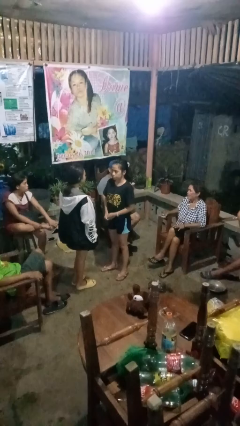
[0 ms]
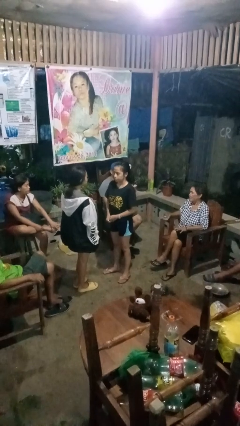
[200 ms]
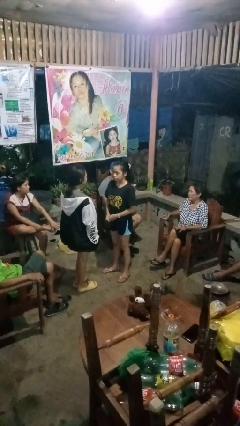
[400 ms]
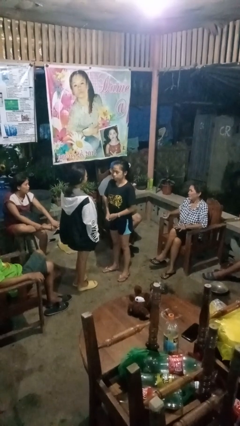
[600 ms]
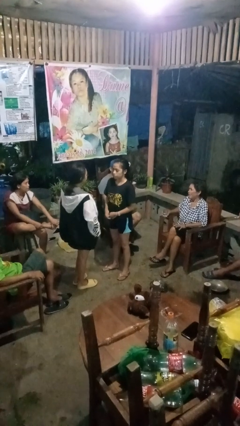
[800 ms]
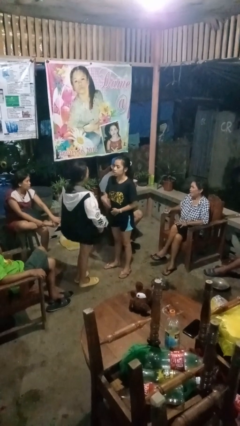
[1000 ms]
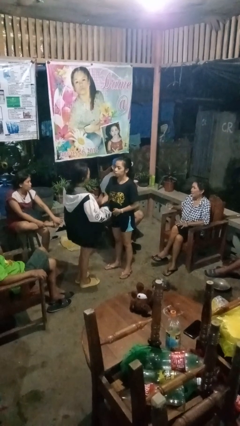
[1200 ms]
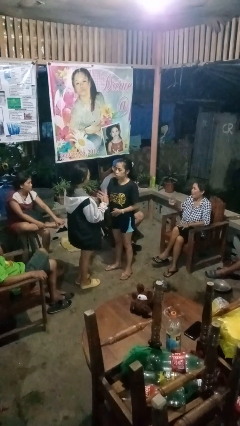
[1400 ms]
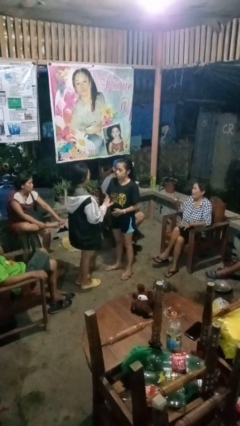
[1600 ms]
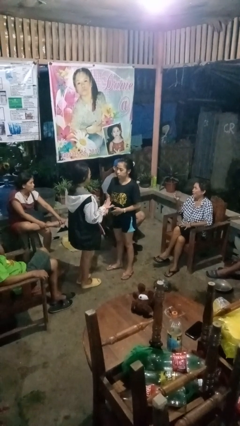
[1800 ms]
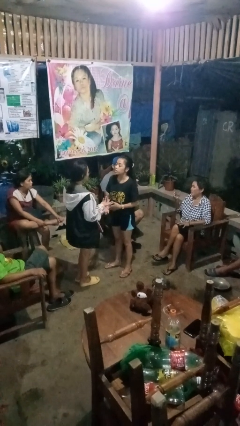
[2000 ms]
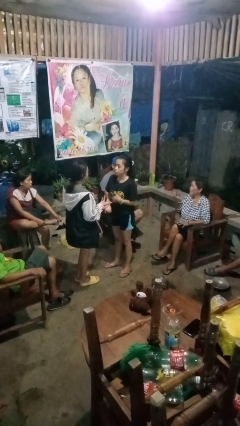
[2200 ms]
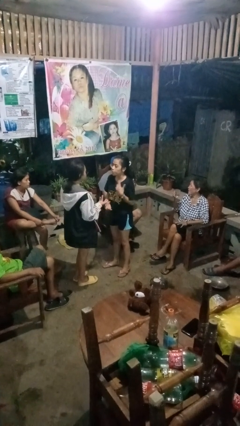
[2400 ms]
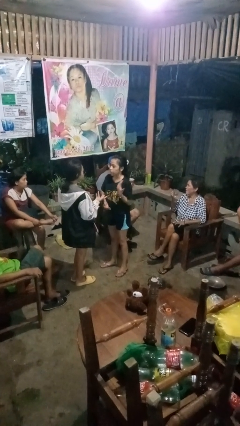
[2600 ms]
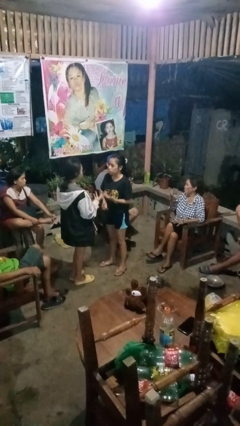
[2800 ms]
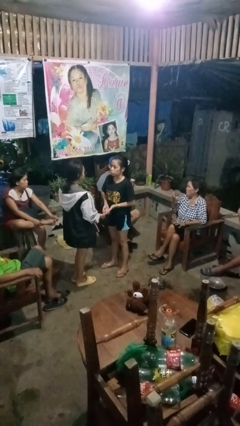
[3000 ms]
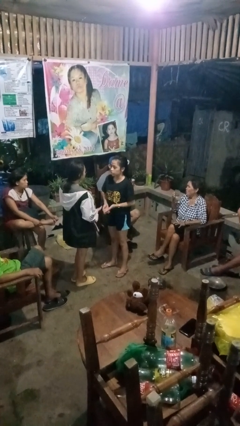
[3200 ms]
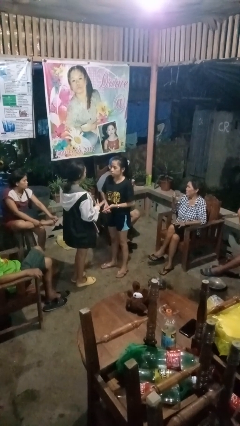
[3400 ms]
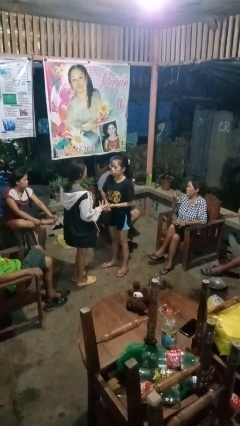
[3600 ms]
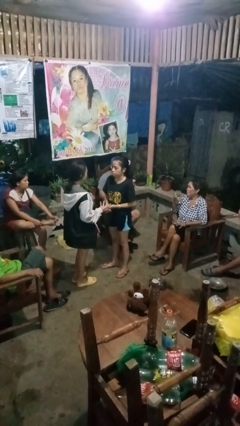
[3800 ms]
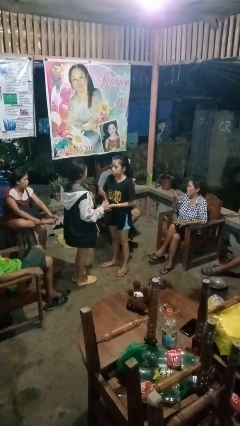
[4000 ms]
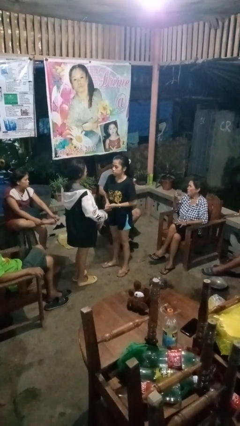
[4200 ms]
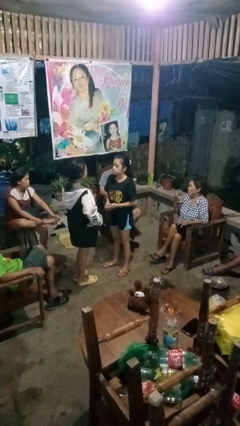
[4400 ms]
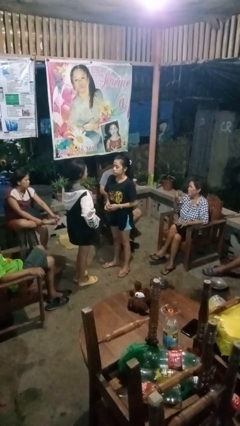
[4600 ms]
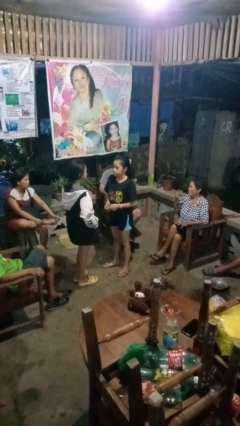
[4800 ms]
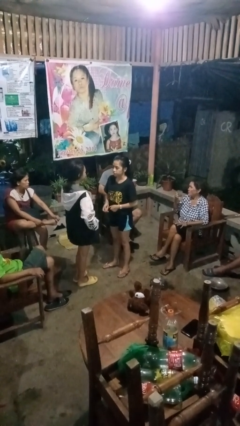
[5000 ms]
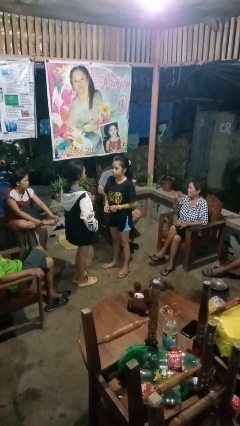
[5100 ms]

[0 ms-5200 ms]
person talks to person

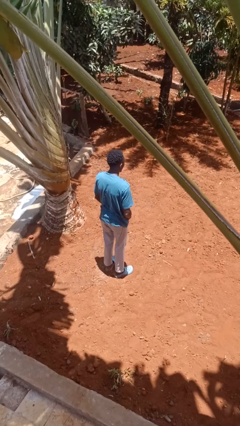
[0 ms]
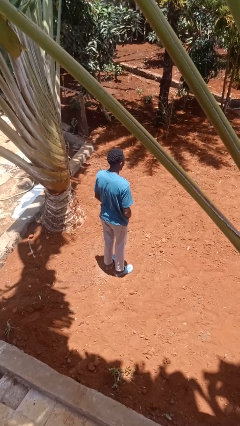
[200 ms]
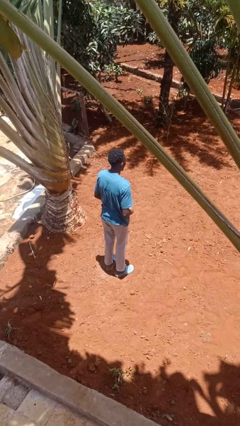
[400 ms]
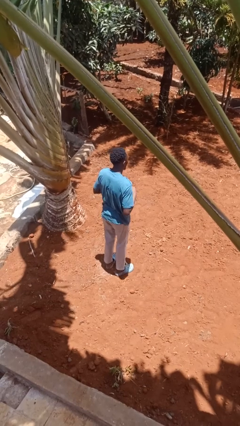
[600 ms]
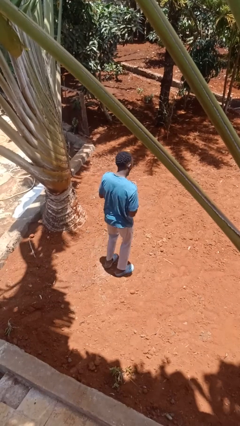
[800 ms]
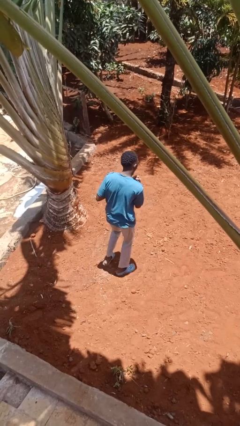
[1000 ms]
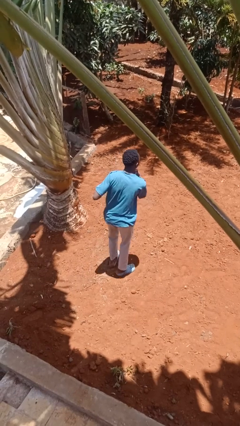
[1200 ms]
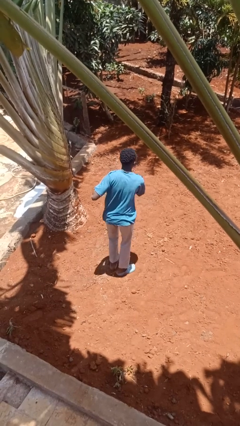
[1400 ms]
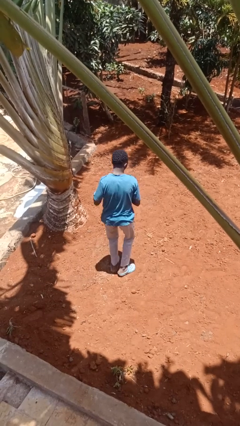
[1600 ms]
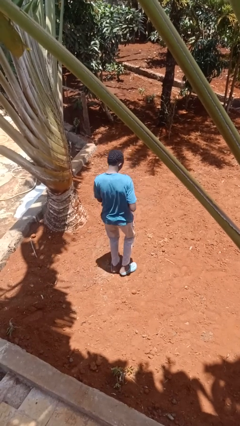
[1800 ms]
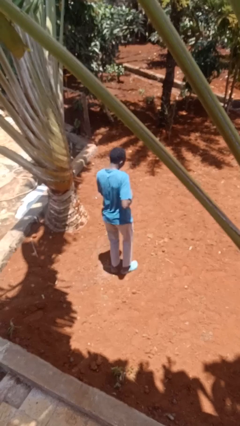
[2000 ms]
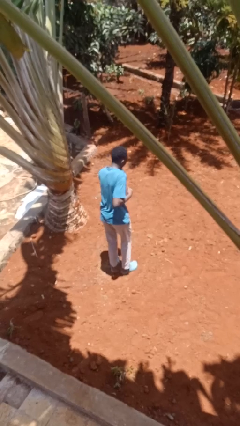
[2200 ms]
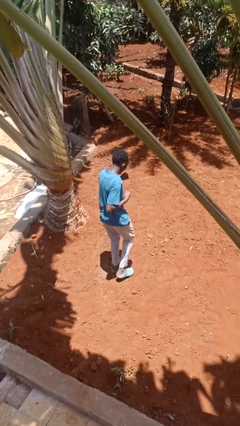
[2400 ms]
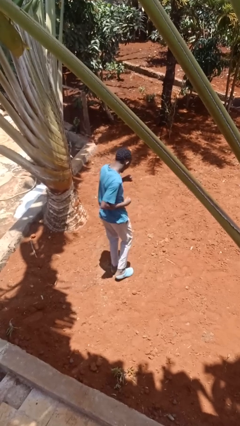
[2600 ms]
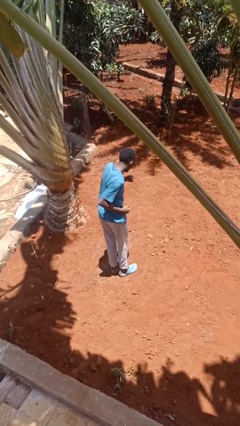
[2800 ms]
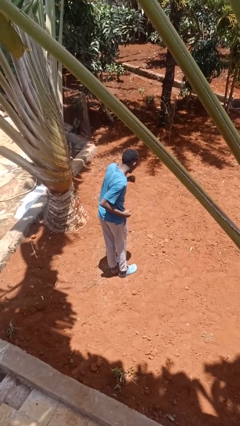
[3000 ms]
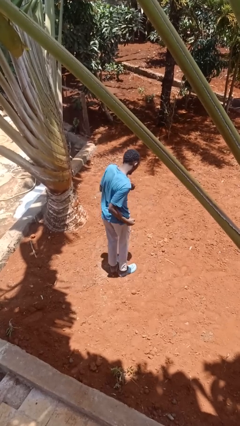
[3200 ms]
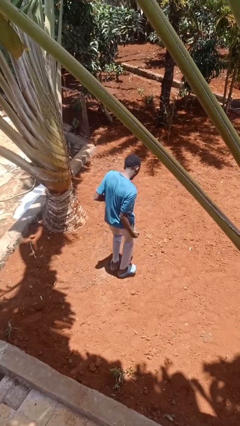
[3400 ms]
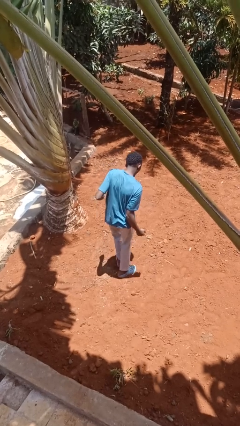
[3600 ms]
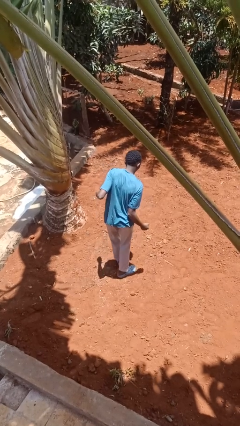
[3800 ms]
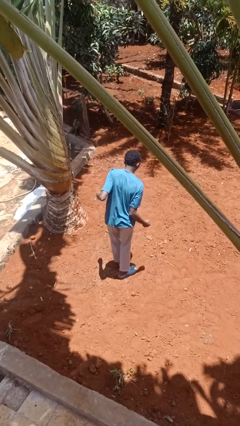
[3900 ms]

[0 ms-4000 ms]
person dances in place

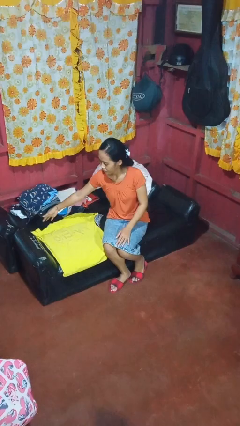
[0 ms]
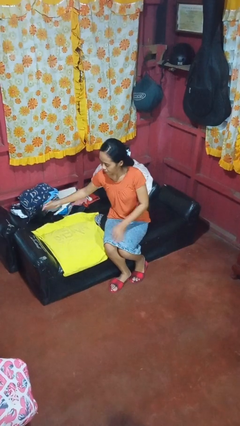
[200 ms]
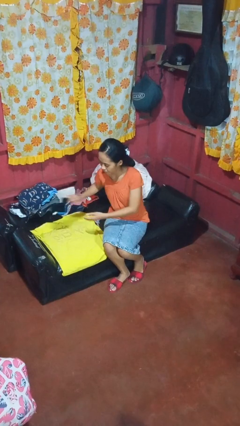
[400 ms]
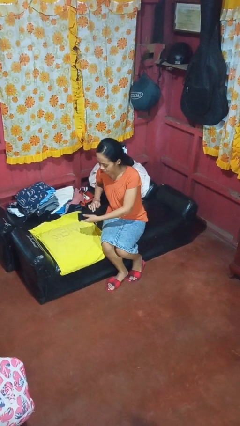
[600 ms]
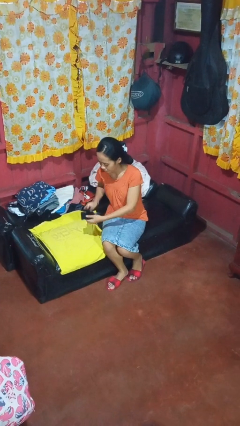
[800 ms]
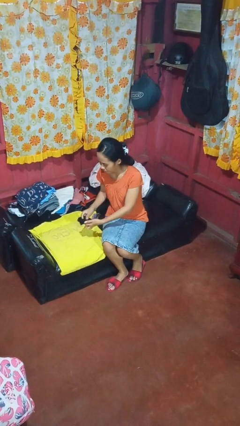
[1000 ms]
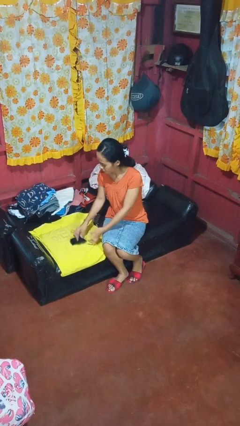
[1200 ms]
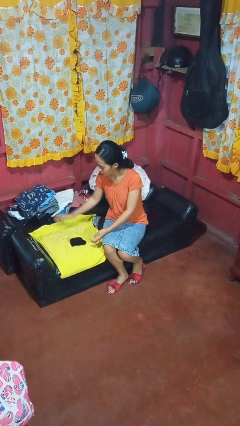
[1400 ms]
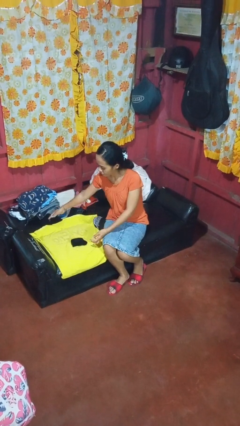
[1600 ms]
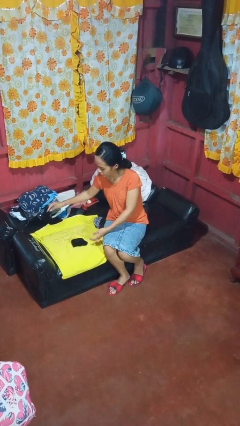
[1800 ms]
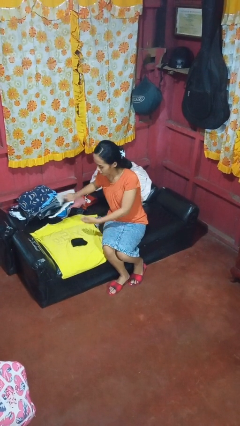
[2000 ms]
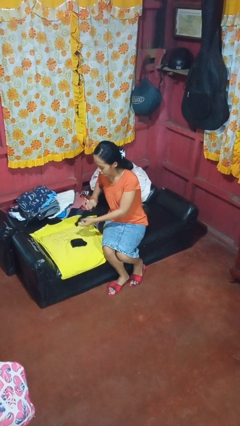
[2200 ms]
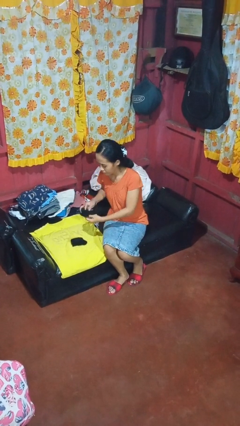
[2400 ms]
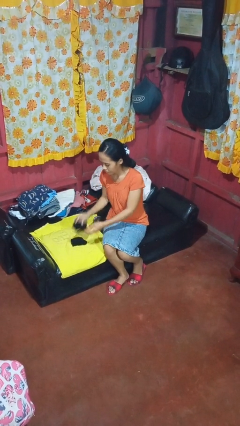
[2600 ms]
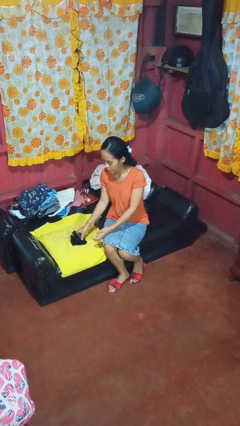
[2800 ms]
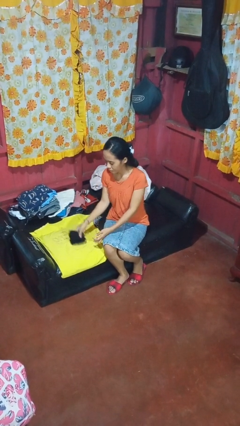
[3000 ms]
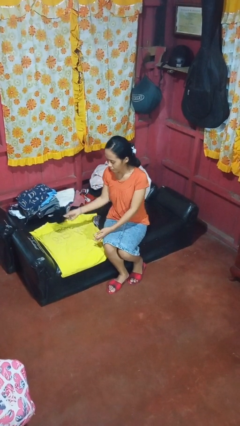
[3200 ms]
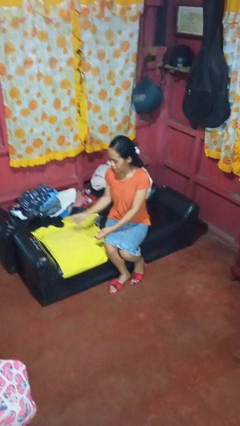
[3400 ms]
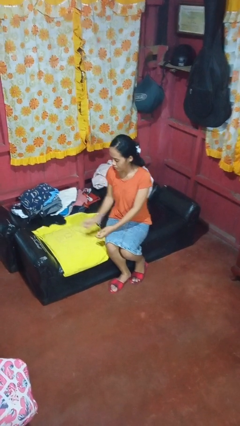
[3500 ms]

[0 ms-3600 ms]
person folds socks

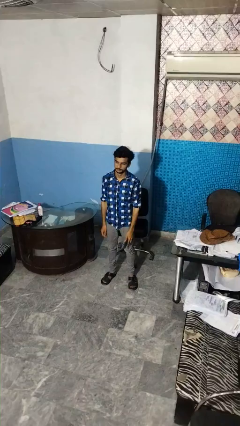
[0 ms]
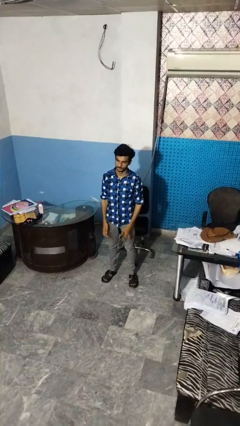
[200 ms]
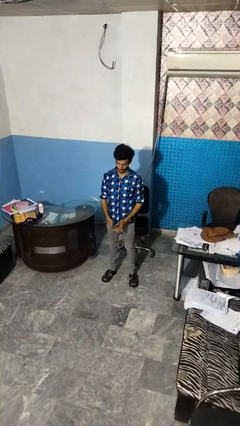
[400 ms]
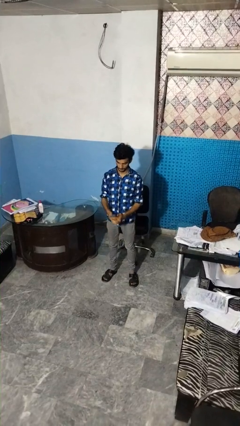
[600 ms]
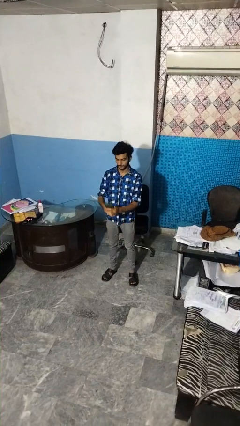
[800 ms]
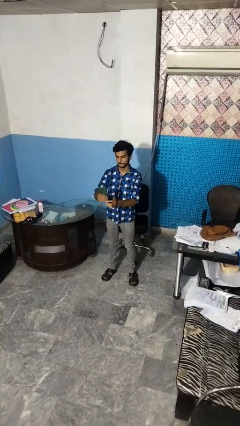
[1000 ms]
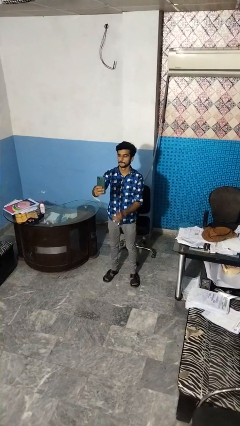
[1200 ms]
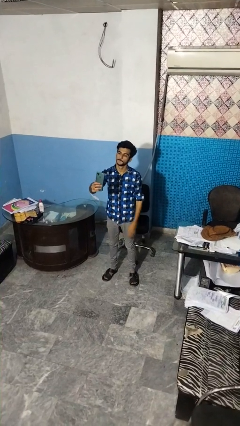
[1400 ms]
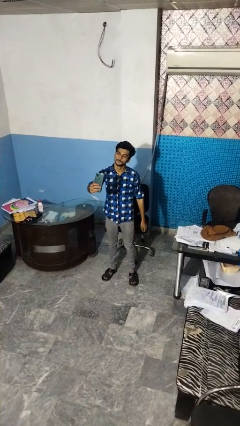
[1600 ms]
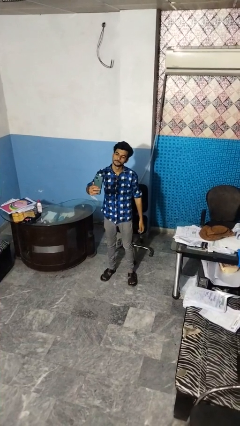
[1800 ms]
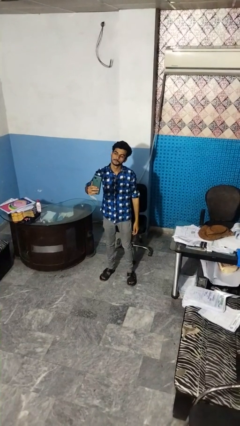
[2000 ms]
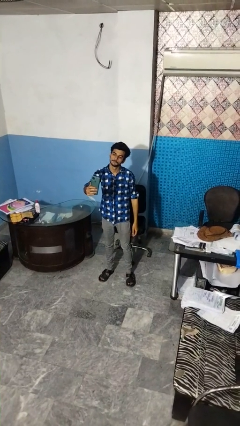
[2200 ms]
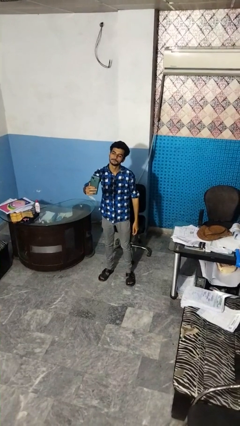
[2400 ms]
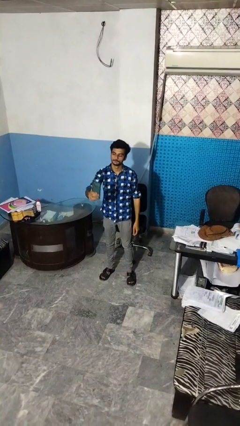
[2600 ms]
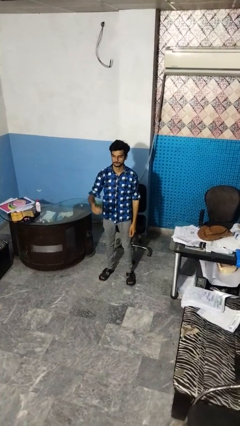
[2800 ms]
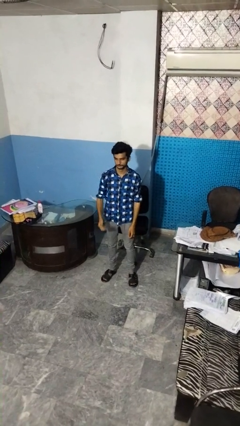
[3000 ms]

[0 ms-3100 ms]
person takes selfie

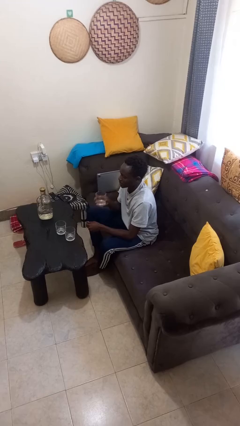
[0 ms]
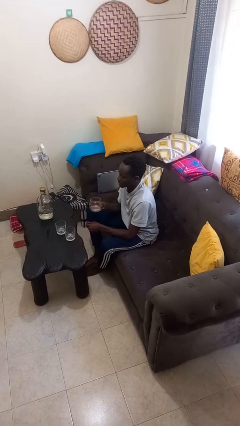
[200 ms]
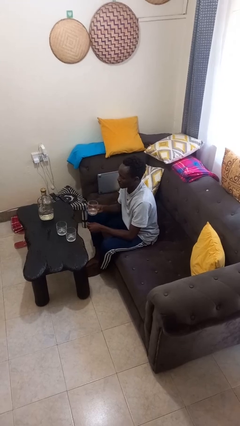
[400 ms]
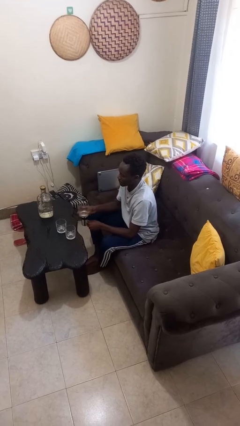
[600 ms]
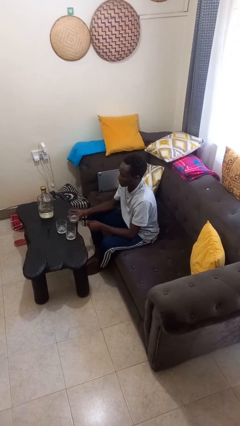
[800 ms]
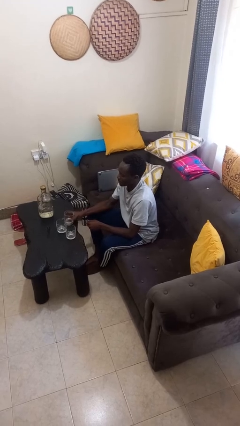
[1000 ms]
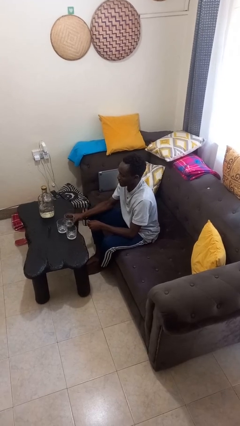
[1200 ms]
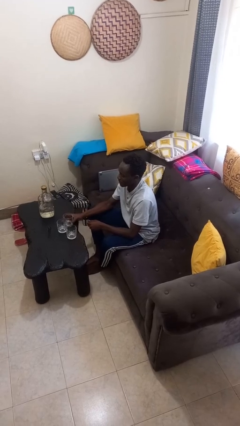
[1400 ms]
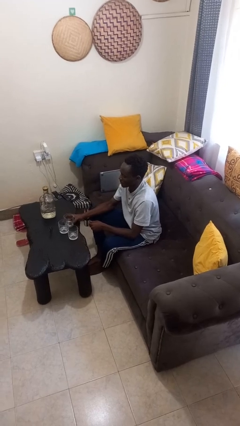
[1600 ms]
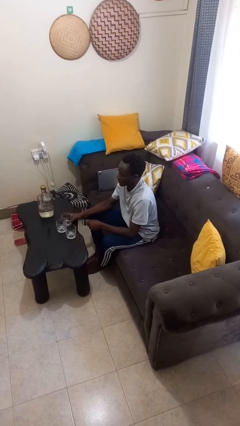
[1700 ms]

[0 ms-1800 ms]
person puts down object on table
